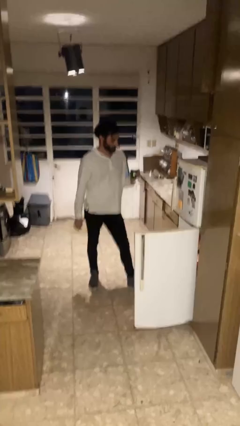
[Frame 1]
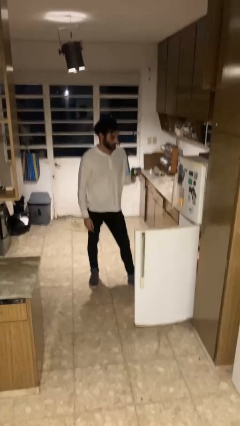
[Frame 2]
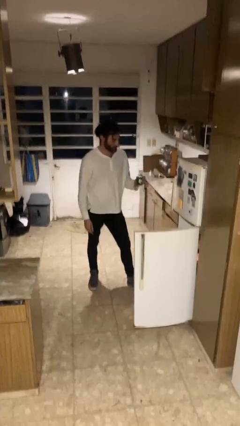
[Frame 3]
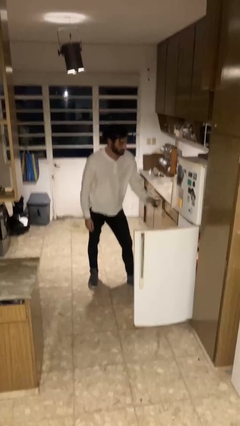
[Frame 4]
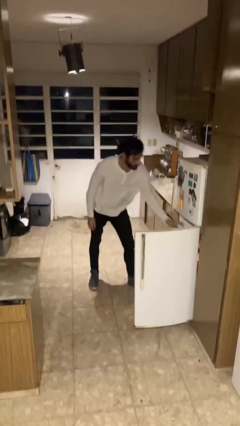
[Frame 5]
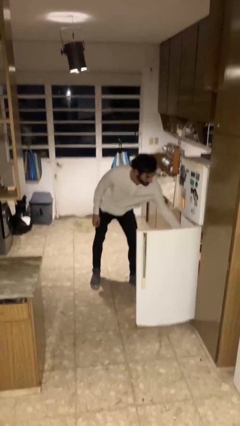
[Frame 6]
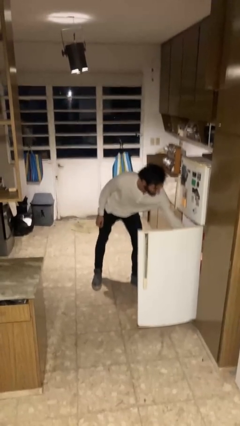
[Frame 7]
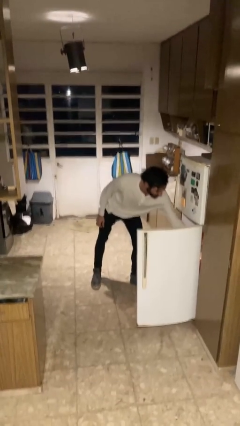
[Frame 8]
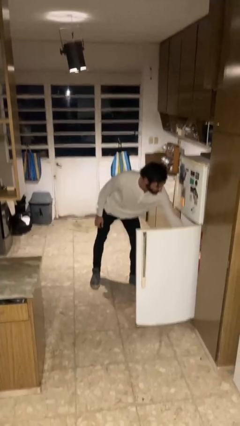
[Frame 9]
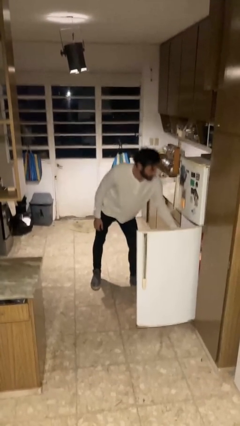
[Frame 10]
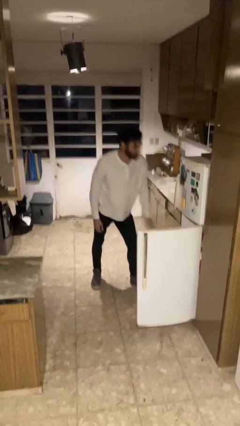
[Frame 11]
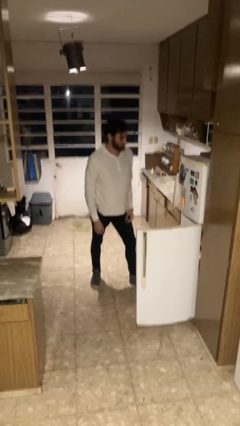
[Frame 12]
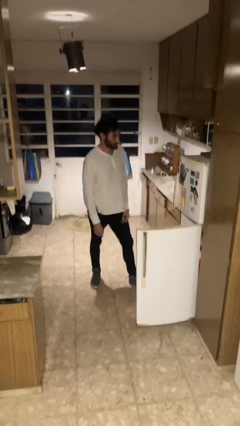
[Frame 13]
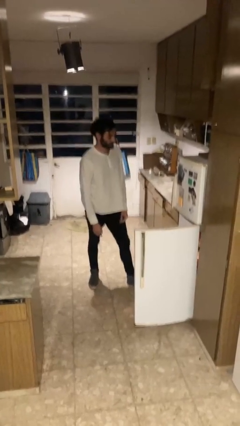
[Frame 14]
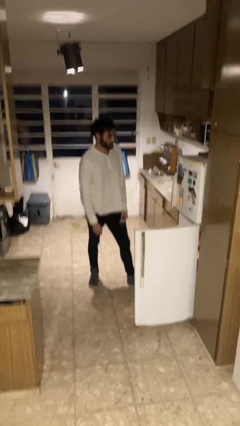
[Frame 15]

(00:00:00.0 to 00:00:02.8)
person puts object into refrigerator

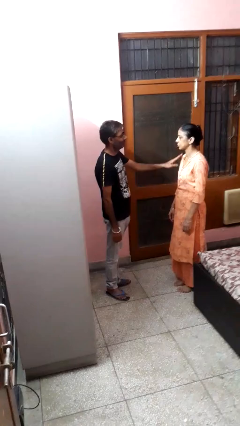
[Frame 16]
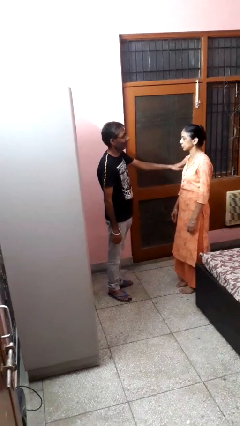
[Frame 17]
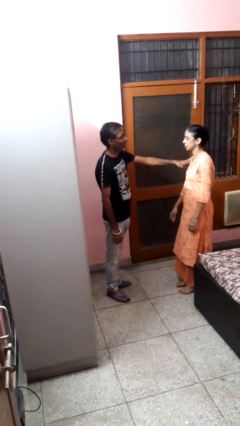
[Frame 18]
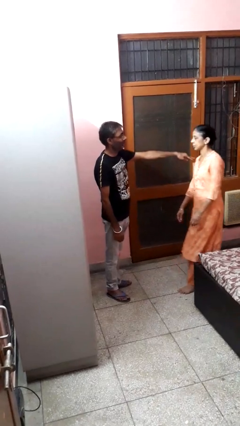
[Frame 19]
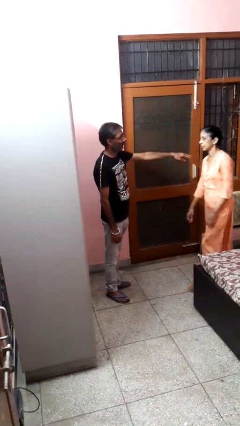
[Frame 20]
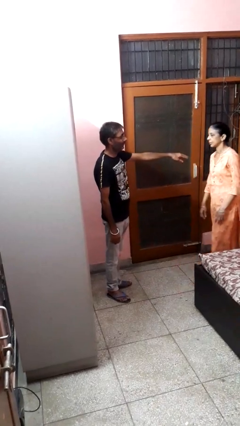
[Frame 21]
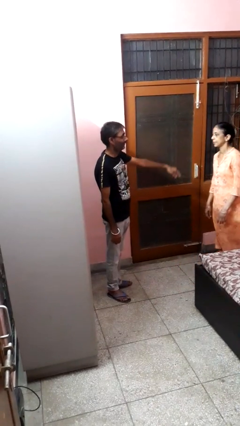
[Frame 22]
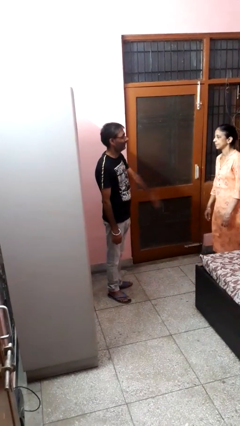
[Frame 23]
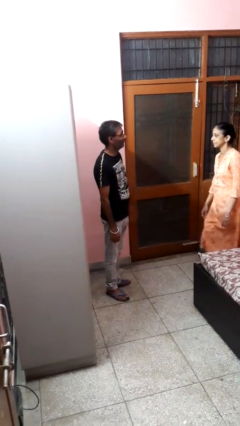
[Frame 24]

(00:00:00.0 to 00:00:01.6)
person shoves person

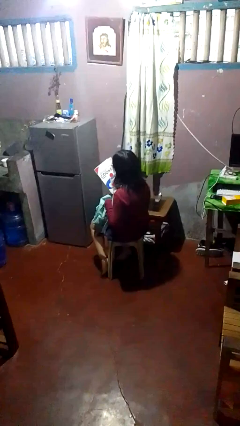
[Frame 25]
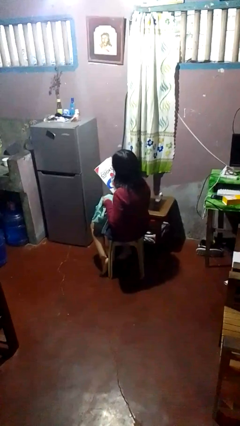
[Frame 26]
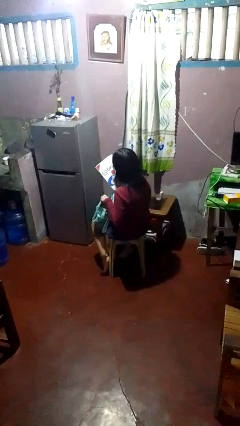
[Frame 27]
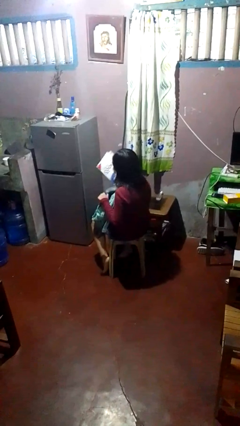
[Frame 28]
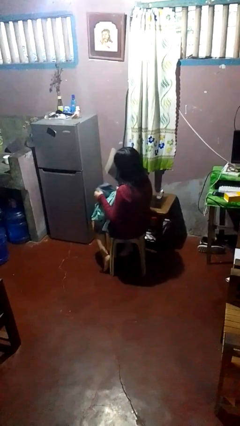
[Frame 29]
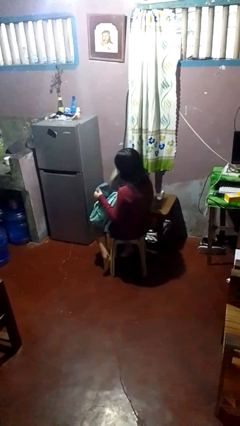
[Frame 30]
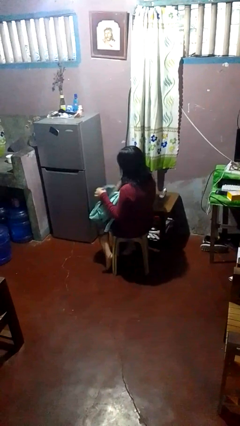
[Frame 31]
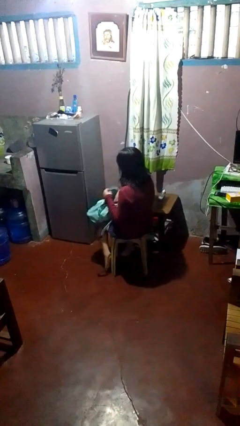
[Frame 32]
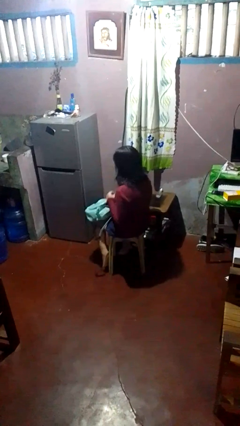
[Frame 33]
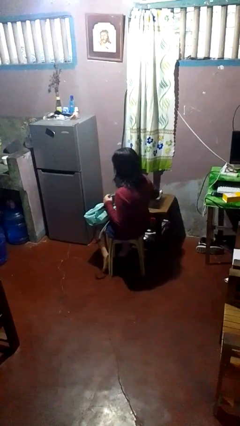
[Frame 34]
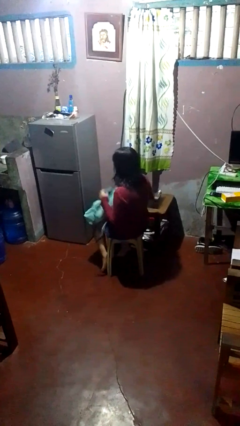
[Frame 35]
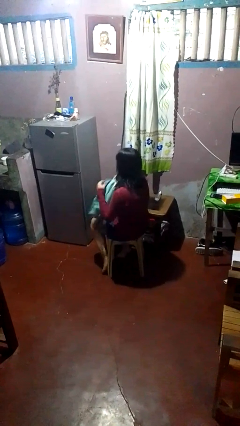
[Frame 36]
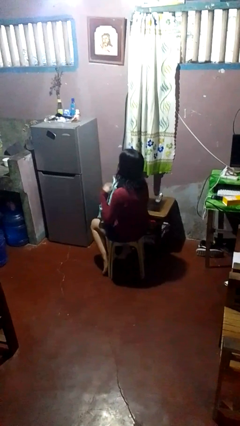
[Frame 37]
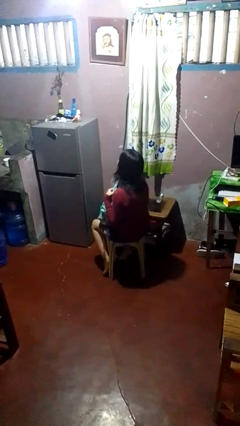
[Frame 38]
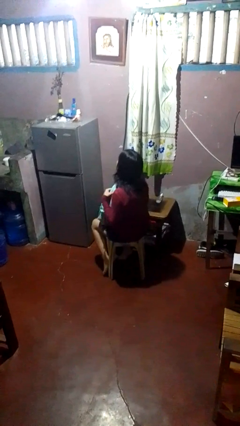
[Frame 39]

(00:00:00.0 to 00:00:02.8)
person puts object into backpack

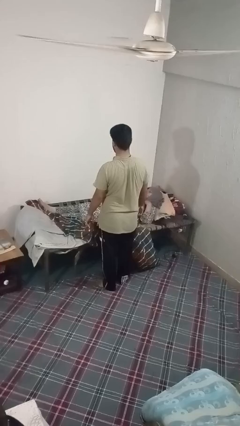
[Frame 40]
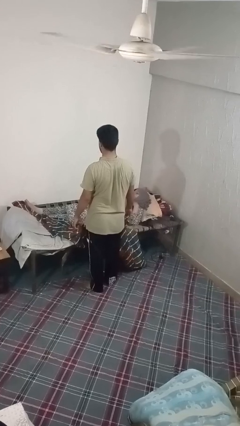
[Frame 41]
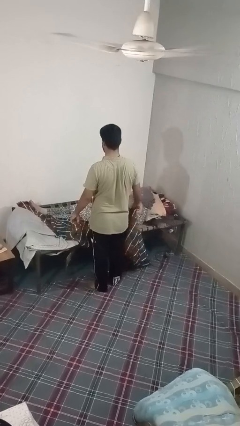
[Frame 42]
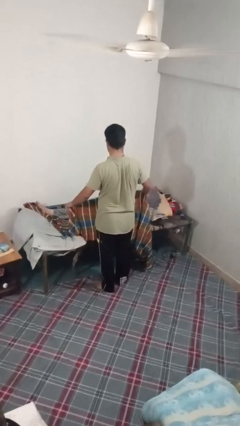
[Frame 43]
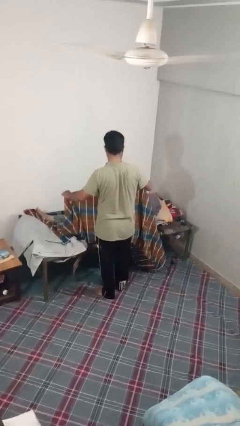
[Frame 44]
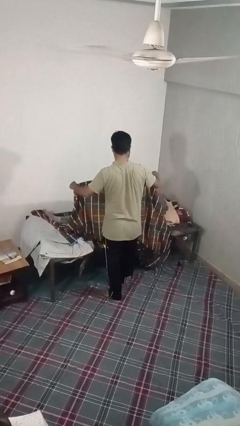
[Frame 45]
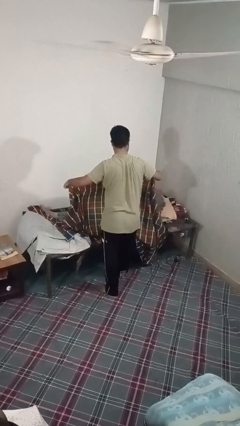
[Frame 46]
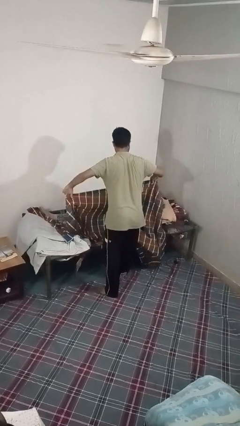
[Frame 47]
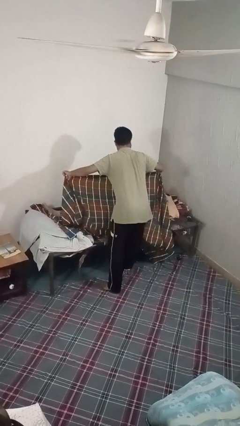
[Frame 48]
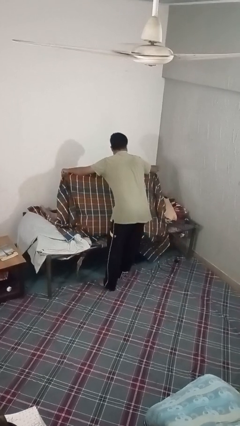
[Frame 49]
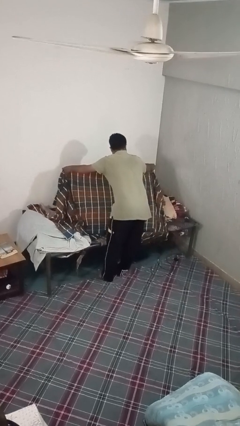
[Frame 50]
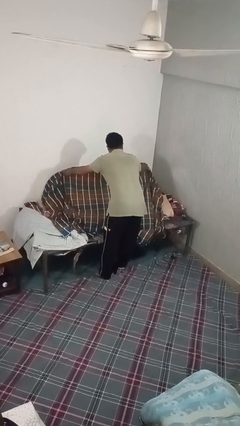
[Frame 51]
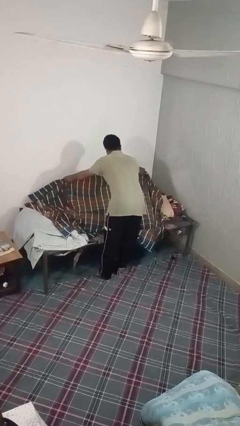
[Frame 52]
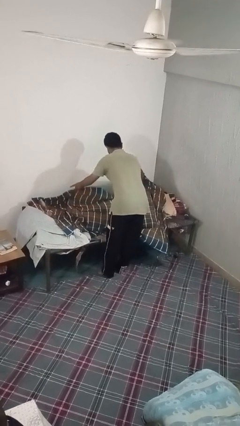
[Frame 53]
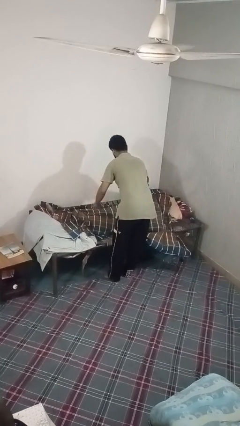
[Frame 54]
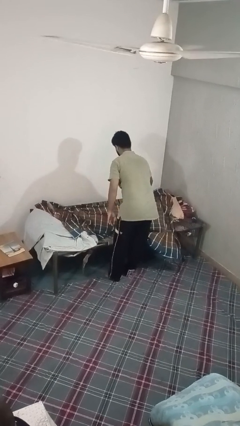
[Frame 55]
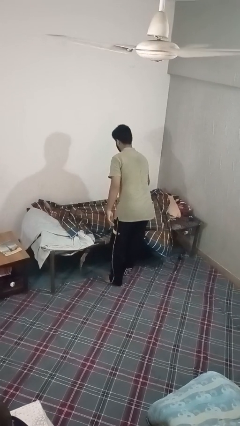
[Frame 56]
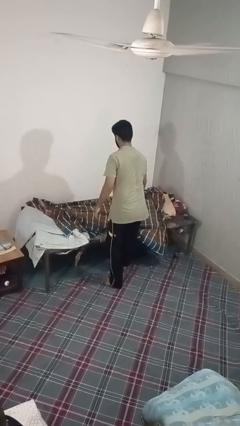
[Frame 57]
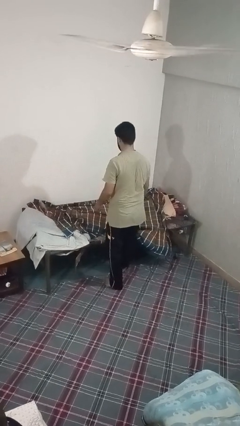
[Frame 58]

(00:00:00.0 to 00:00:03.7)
person covers friend with blanket

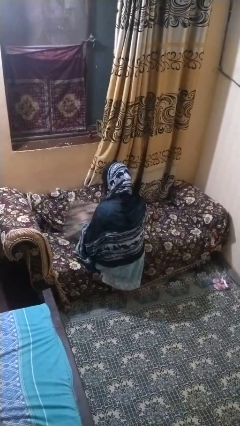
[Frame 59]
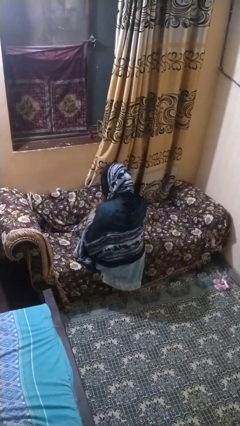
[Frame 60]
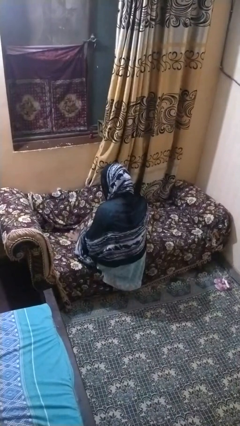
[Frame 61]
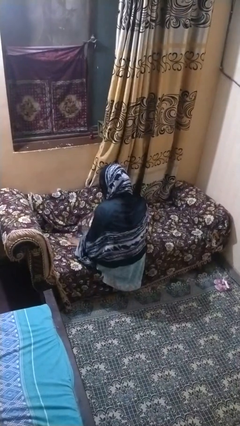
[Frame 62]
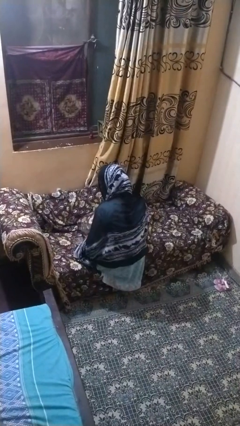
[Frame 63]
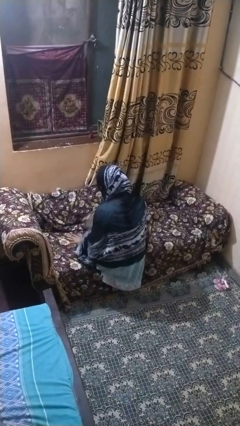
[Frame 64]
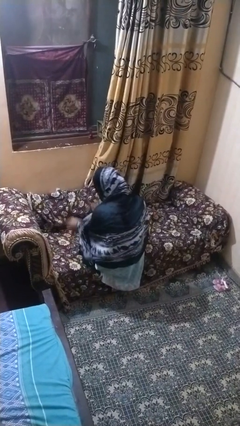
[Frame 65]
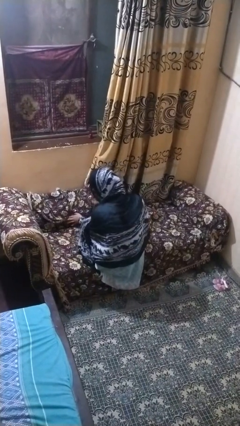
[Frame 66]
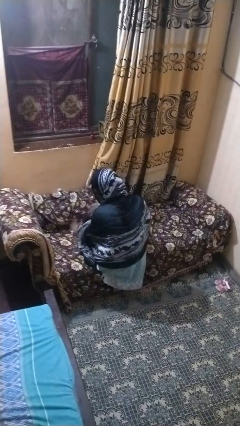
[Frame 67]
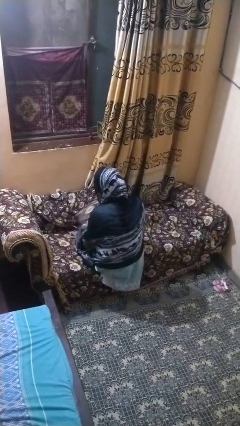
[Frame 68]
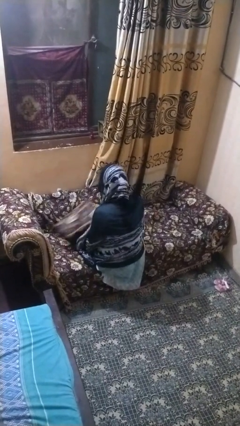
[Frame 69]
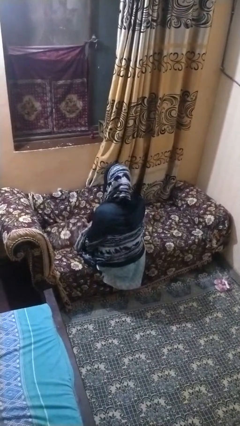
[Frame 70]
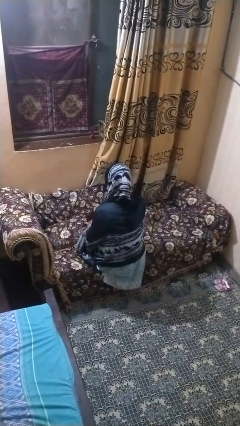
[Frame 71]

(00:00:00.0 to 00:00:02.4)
person searches in couch

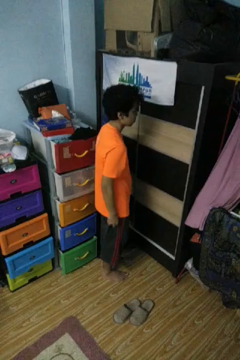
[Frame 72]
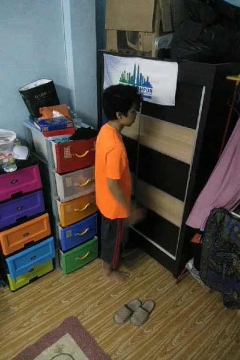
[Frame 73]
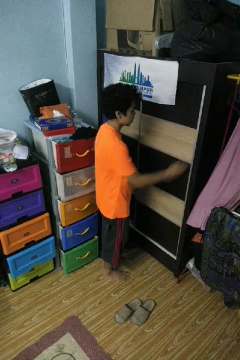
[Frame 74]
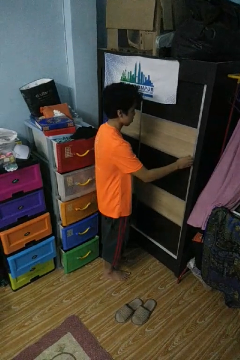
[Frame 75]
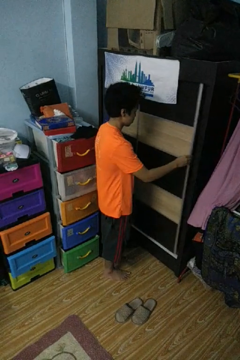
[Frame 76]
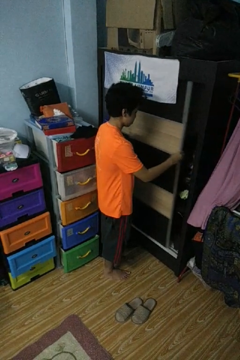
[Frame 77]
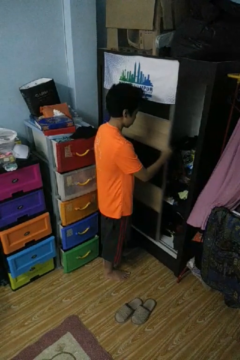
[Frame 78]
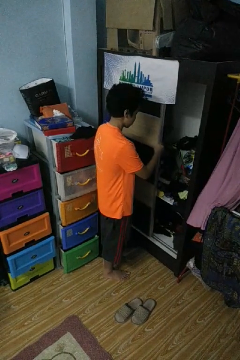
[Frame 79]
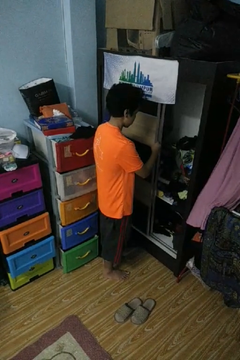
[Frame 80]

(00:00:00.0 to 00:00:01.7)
person opens closet door

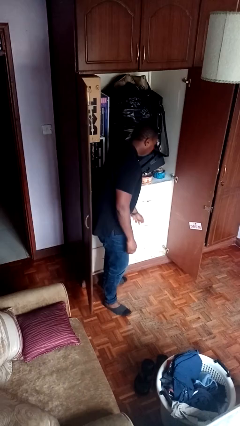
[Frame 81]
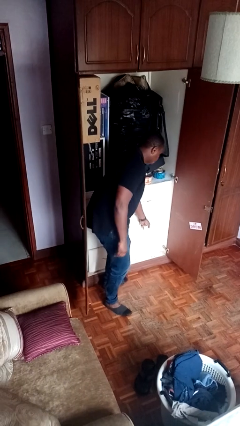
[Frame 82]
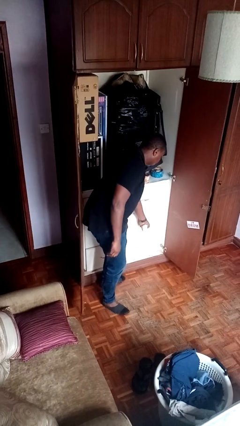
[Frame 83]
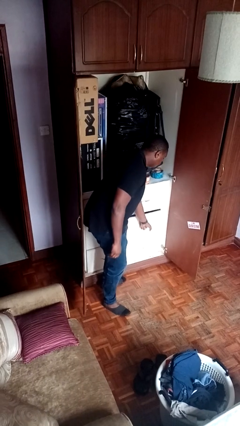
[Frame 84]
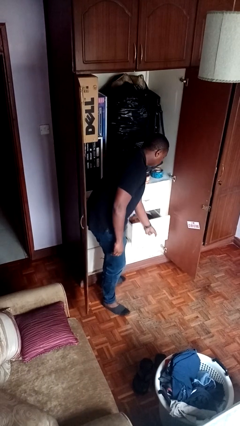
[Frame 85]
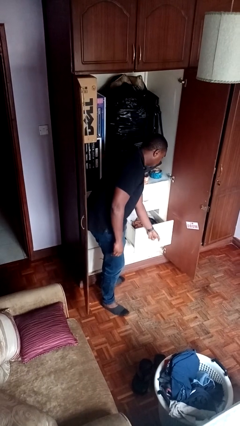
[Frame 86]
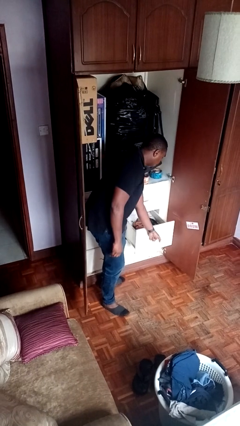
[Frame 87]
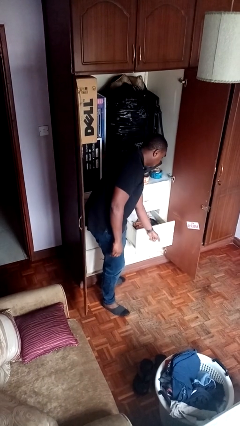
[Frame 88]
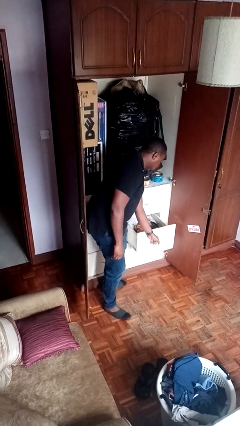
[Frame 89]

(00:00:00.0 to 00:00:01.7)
person opens dresser drawer

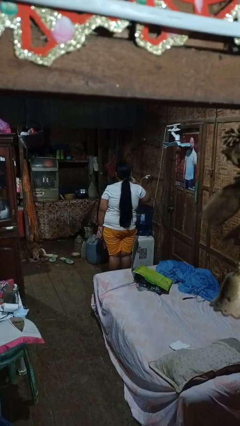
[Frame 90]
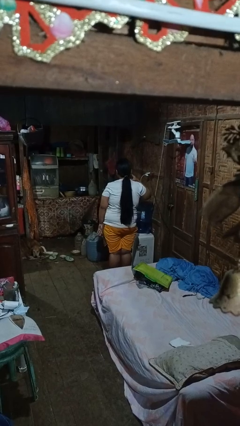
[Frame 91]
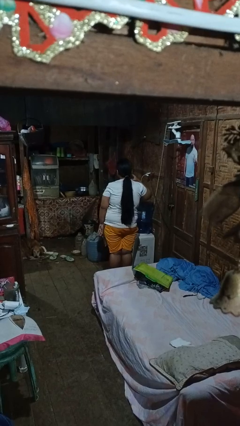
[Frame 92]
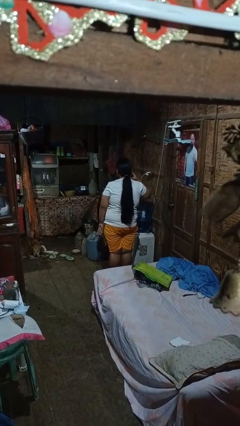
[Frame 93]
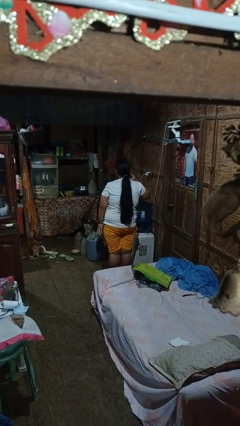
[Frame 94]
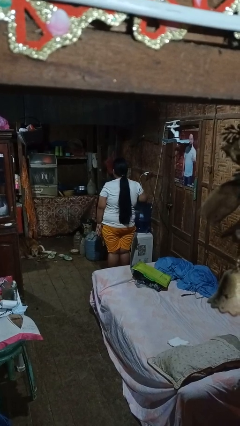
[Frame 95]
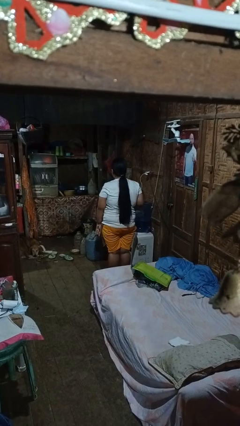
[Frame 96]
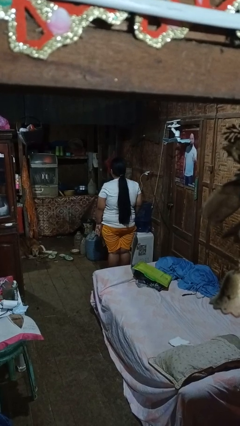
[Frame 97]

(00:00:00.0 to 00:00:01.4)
person gestures listen closely
